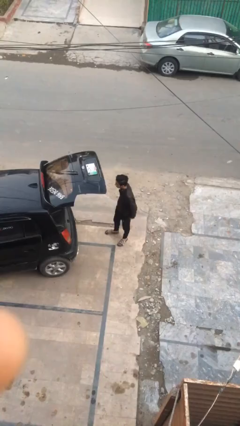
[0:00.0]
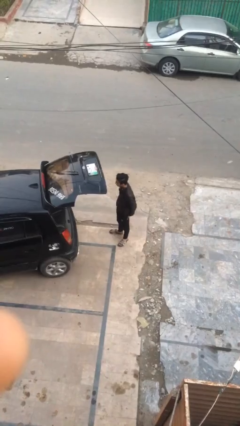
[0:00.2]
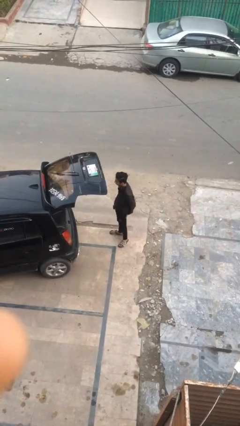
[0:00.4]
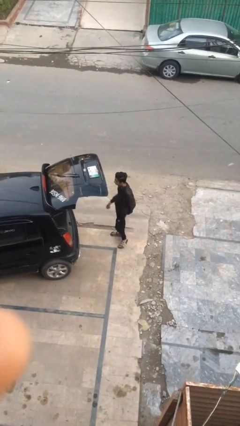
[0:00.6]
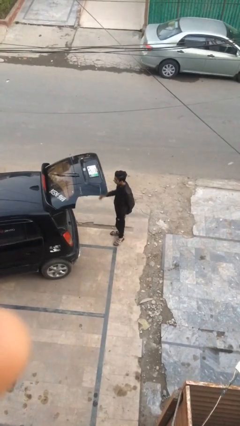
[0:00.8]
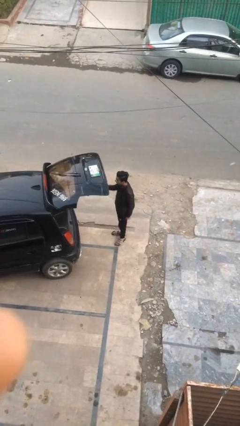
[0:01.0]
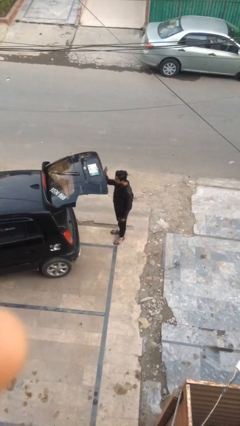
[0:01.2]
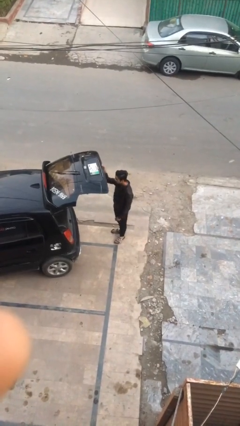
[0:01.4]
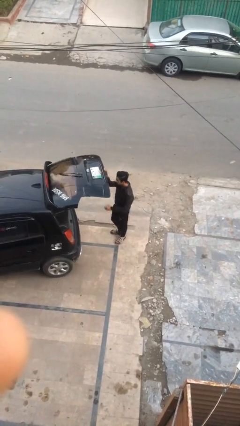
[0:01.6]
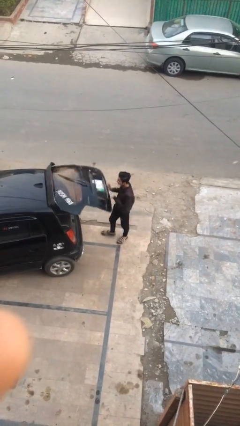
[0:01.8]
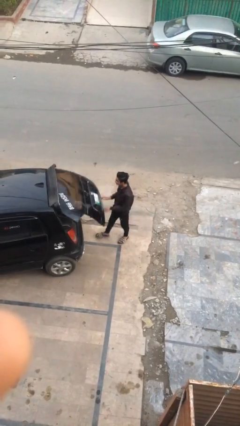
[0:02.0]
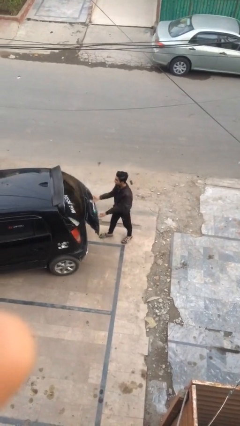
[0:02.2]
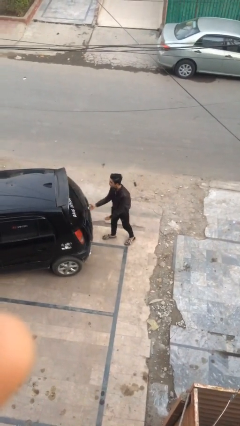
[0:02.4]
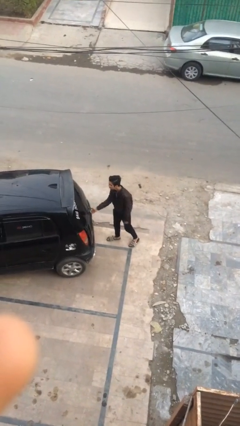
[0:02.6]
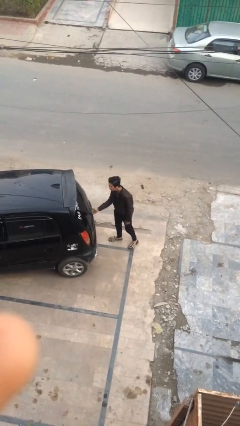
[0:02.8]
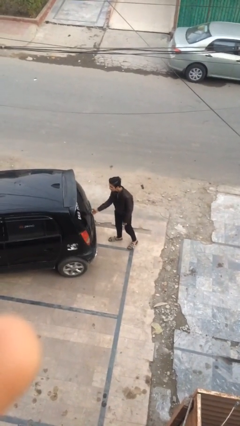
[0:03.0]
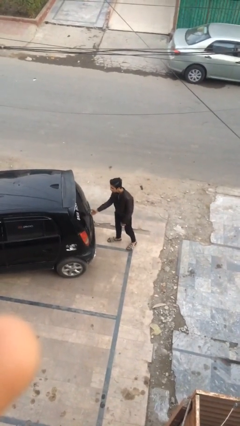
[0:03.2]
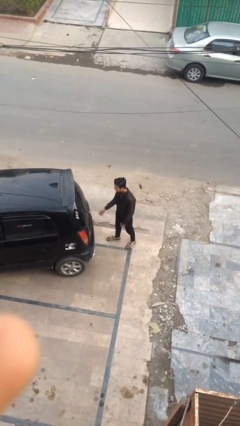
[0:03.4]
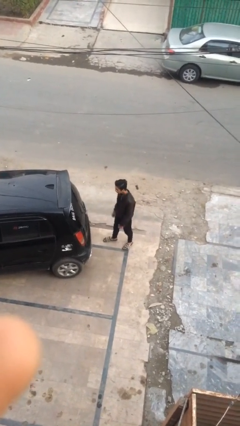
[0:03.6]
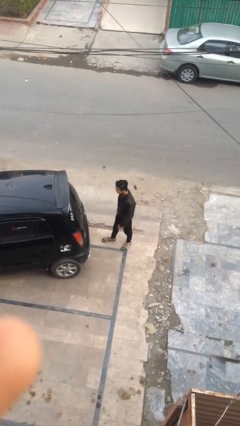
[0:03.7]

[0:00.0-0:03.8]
person closes car trunk

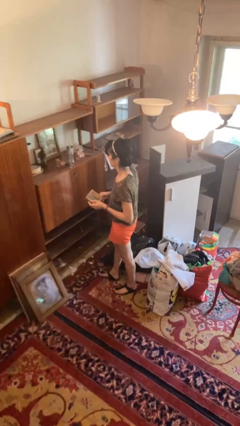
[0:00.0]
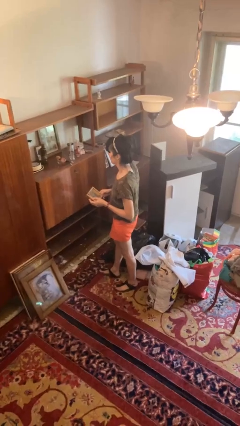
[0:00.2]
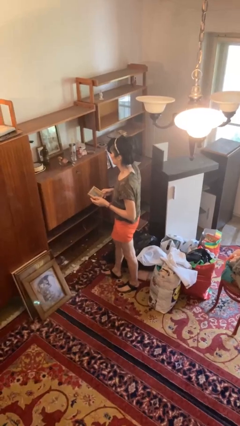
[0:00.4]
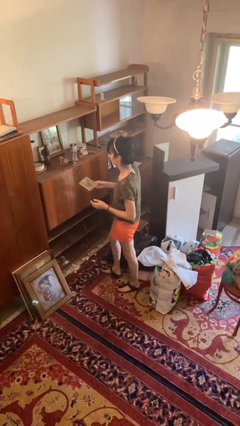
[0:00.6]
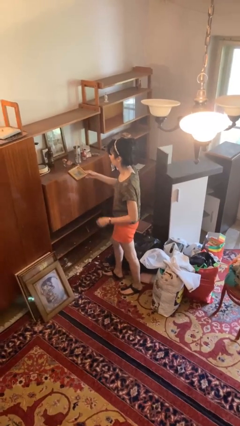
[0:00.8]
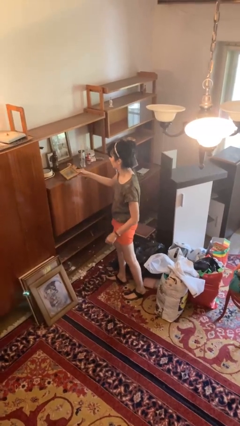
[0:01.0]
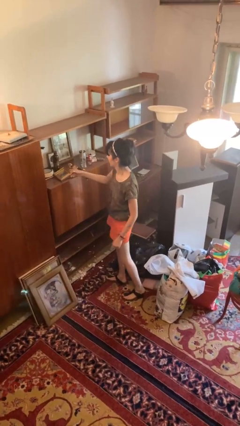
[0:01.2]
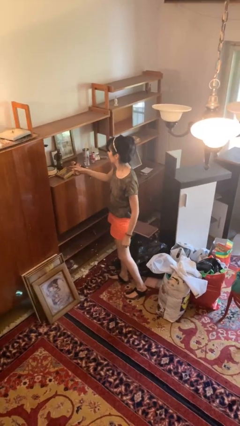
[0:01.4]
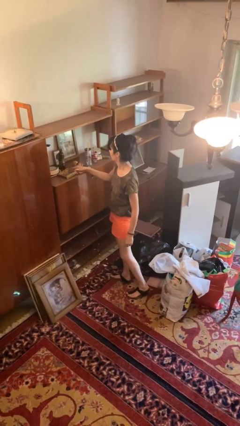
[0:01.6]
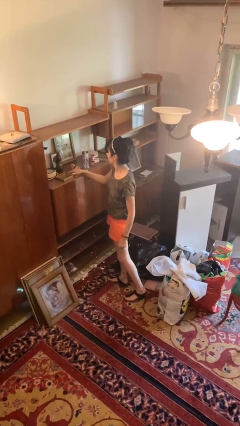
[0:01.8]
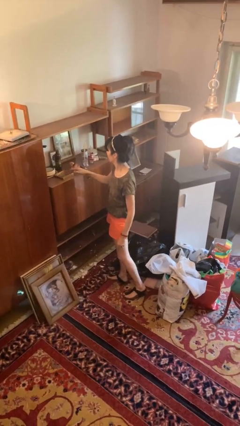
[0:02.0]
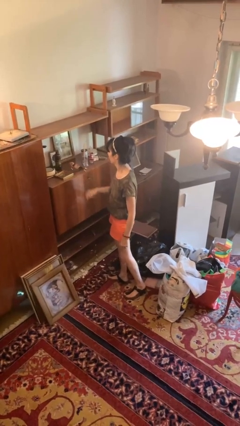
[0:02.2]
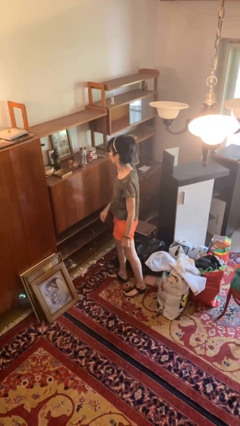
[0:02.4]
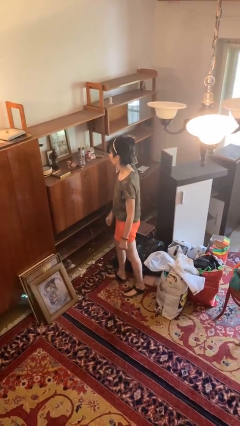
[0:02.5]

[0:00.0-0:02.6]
person puts down object on countertop

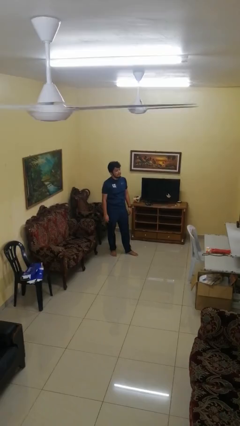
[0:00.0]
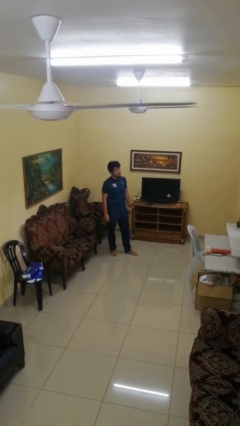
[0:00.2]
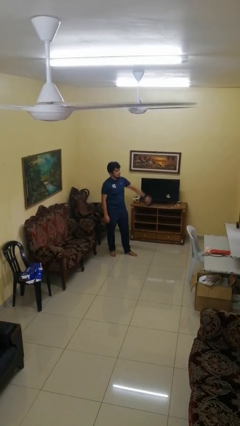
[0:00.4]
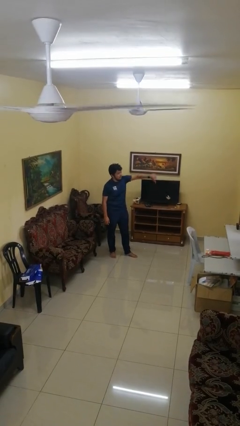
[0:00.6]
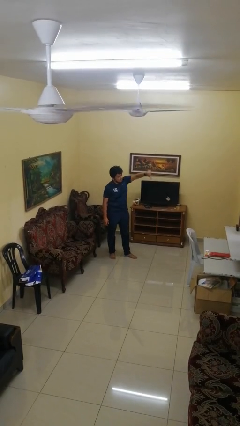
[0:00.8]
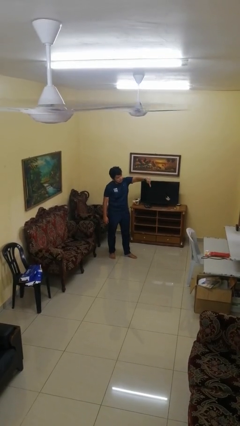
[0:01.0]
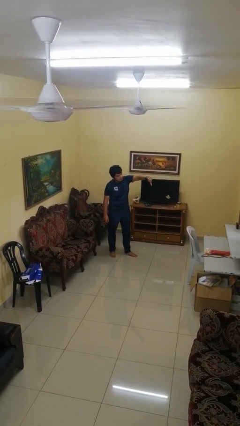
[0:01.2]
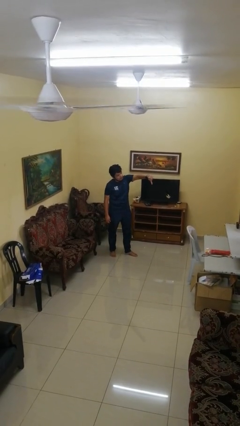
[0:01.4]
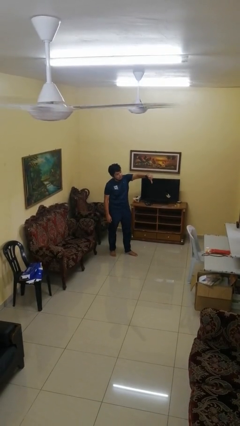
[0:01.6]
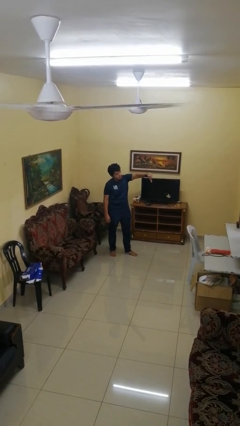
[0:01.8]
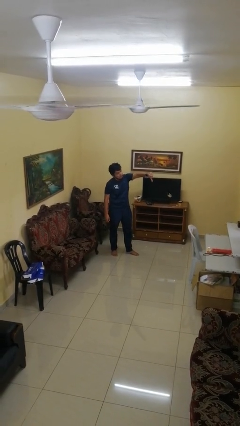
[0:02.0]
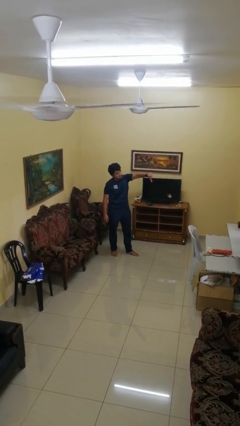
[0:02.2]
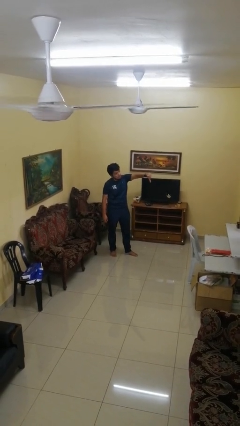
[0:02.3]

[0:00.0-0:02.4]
person gestures thumbs down

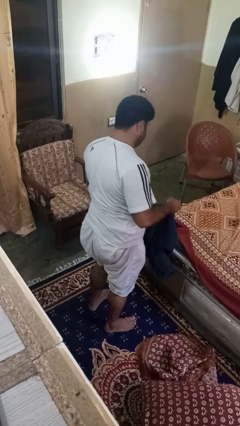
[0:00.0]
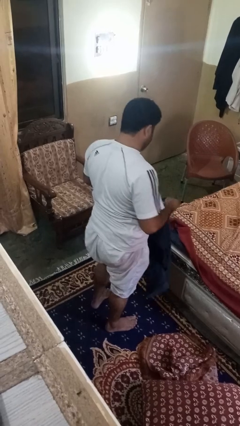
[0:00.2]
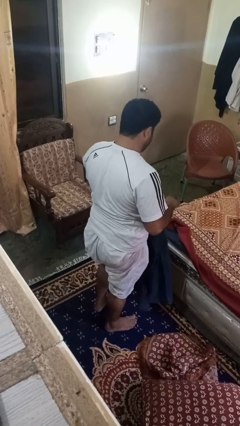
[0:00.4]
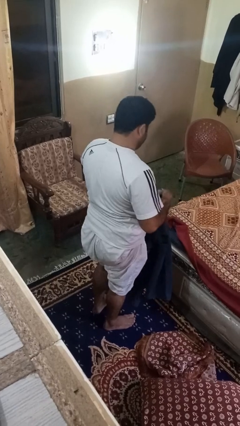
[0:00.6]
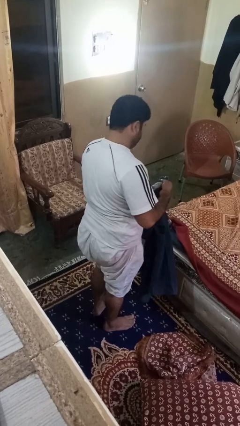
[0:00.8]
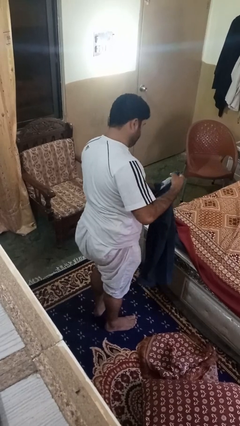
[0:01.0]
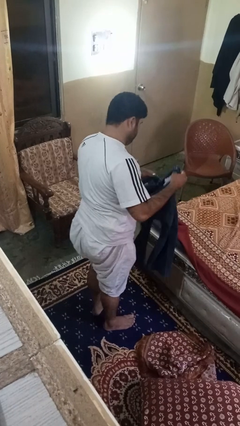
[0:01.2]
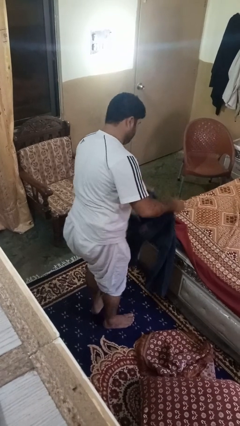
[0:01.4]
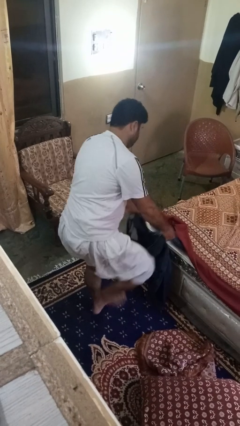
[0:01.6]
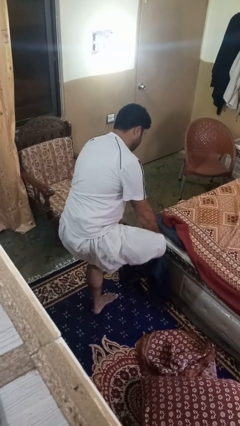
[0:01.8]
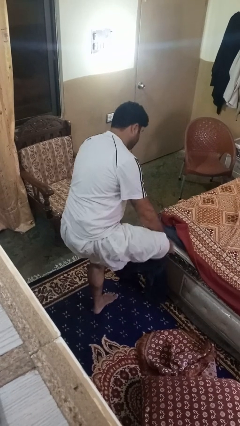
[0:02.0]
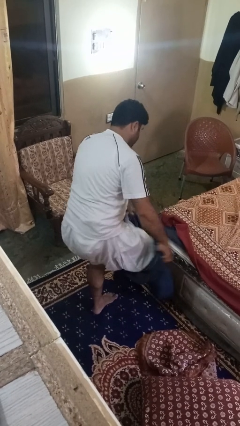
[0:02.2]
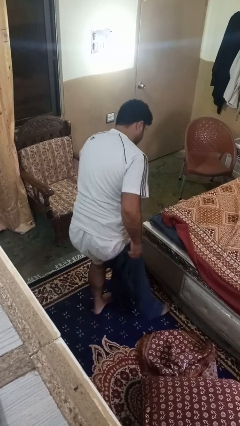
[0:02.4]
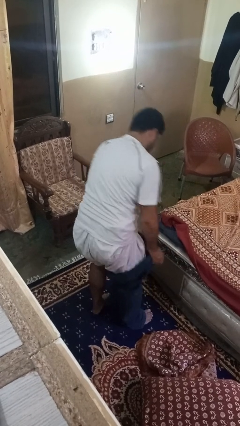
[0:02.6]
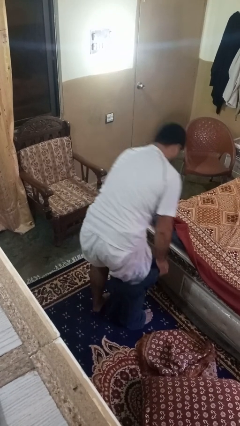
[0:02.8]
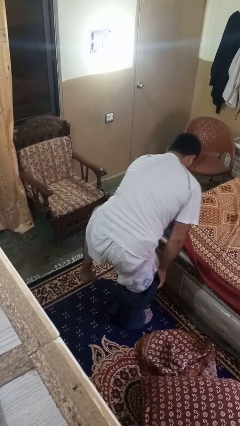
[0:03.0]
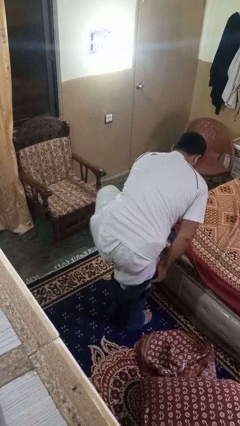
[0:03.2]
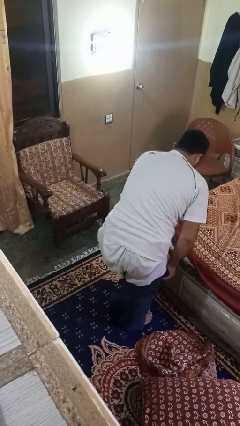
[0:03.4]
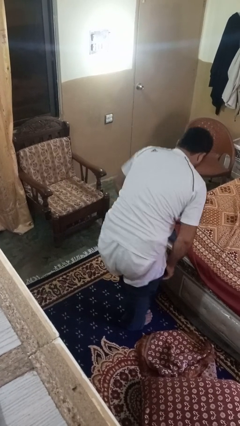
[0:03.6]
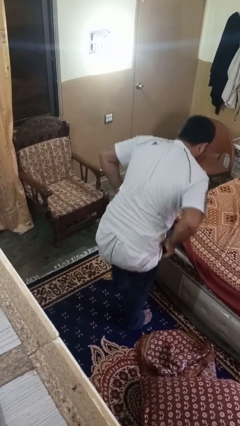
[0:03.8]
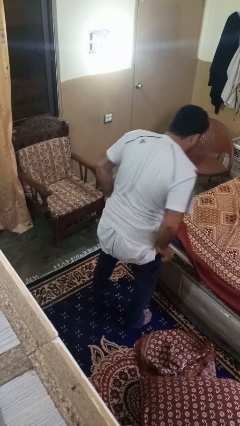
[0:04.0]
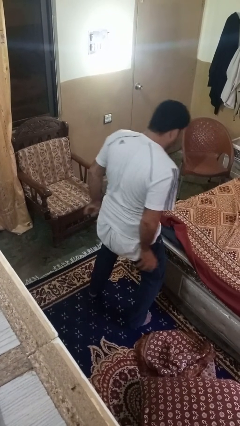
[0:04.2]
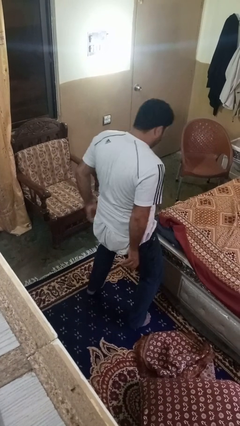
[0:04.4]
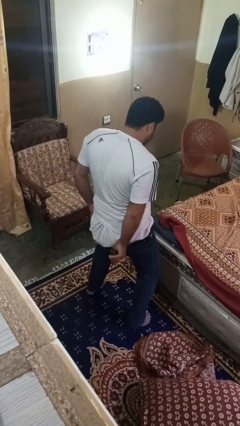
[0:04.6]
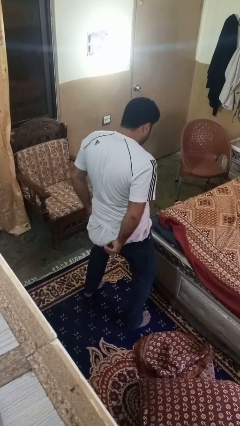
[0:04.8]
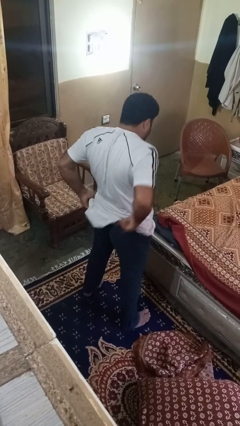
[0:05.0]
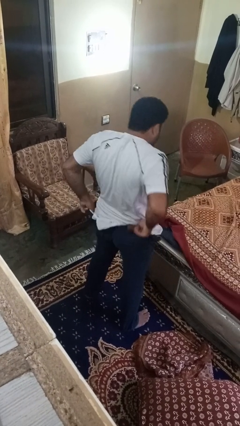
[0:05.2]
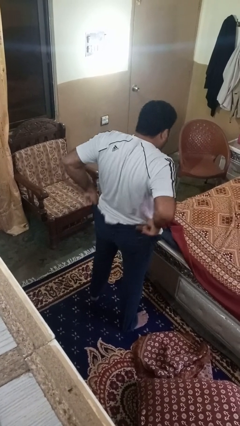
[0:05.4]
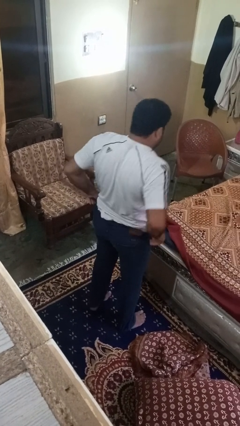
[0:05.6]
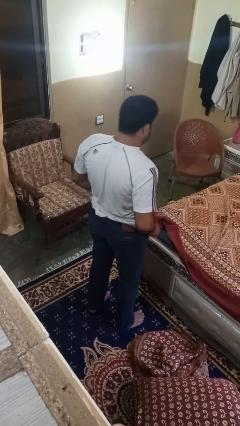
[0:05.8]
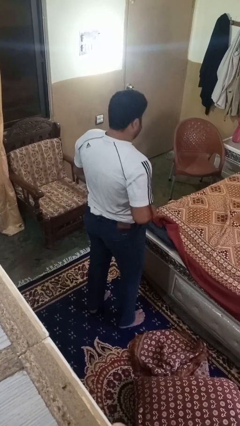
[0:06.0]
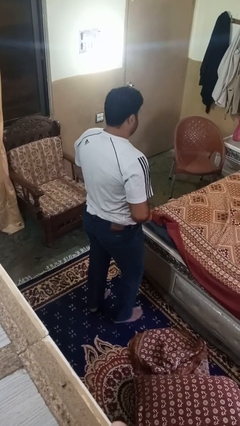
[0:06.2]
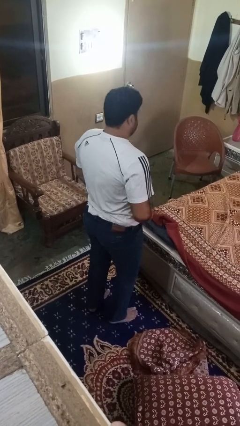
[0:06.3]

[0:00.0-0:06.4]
person puts on pants

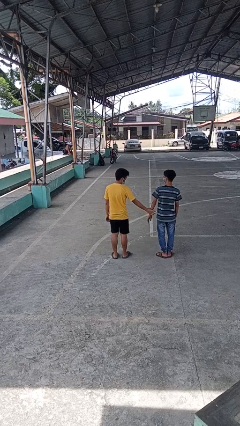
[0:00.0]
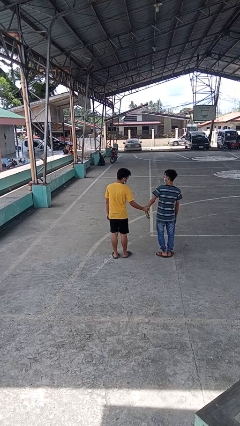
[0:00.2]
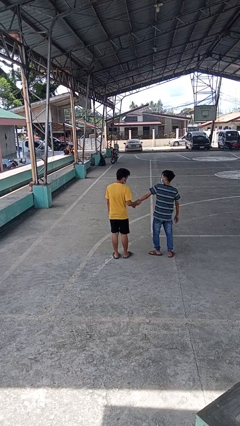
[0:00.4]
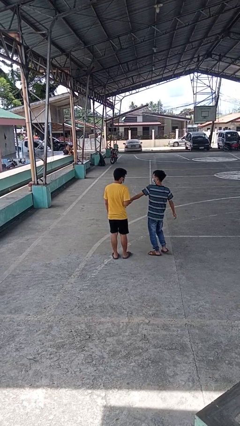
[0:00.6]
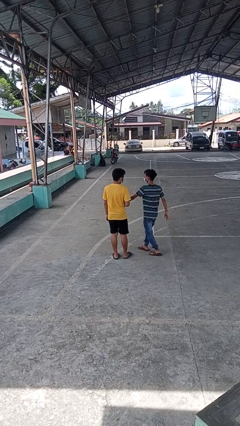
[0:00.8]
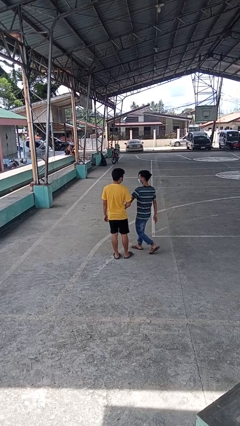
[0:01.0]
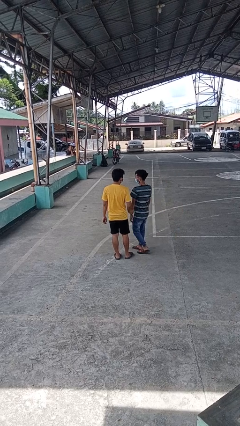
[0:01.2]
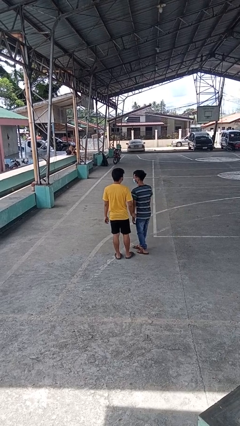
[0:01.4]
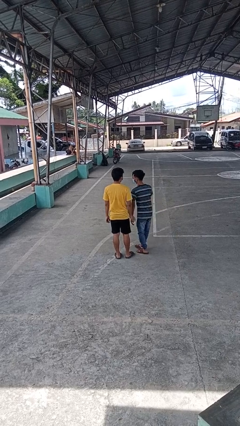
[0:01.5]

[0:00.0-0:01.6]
person grabs person by forearm

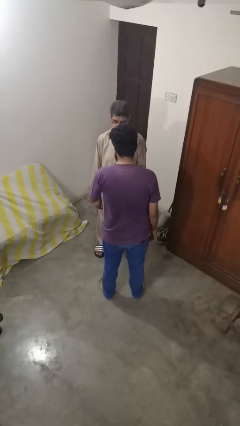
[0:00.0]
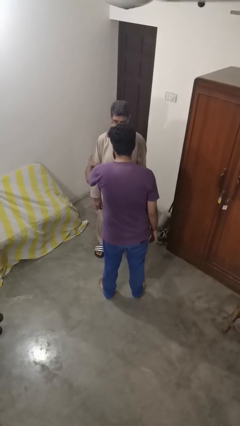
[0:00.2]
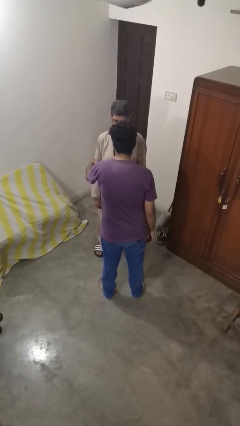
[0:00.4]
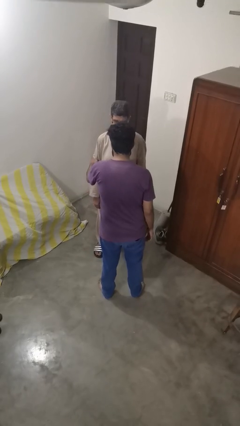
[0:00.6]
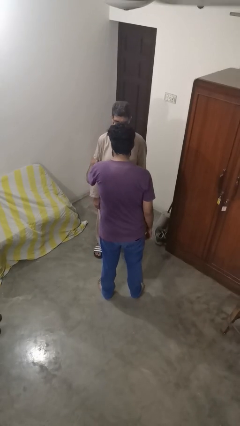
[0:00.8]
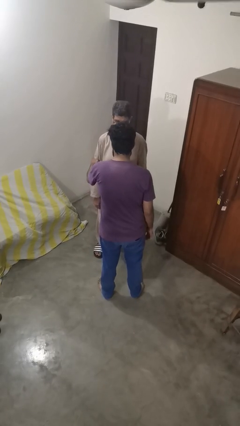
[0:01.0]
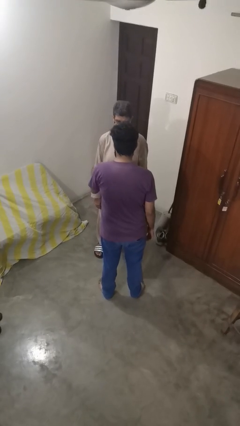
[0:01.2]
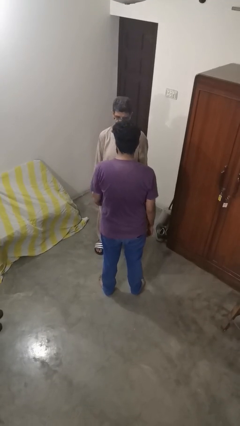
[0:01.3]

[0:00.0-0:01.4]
person grabs person by bicep
